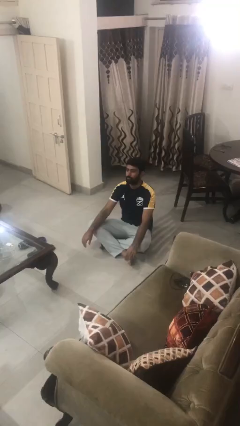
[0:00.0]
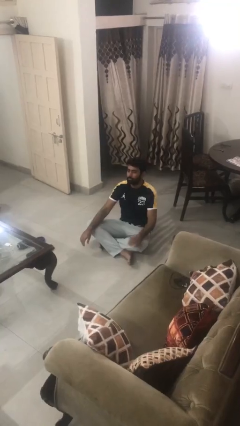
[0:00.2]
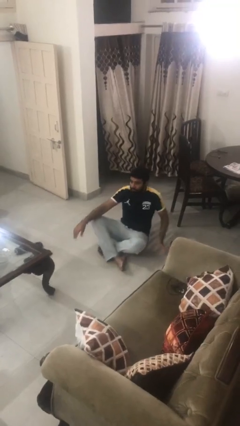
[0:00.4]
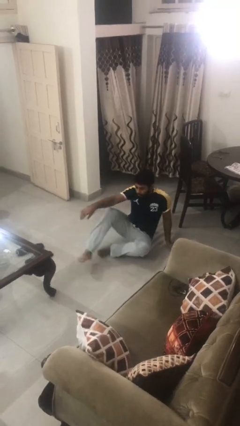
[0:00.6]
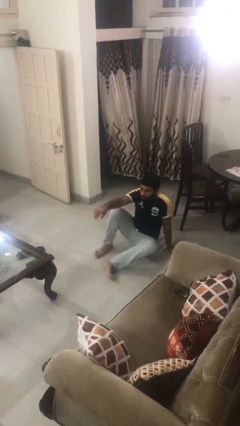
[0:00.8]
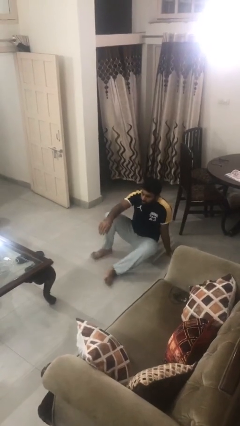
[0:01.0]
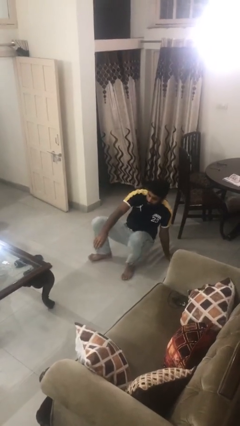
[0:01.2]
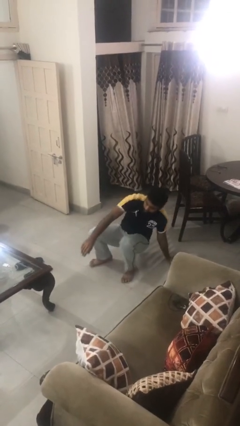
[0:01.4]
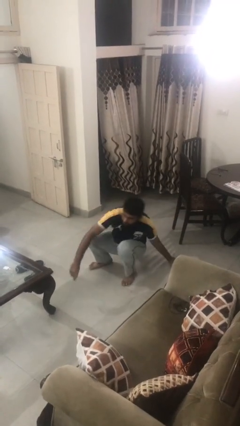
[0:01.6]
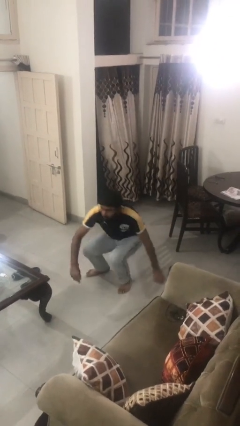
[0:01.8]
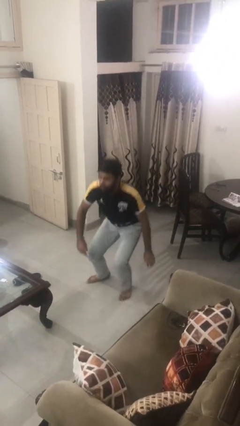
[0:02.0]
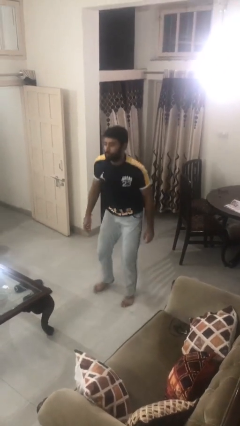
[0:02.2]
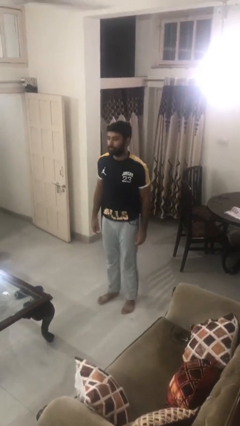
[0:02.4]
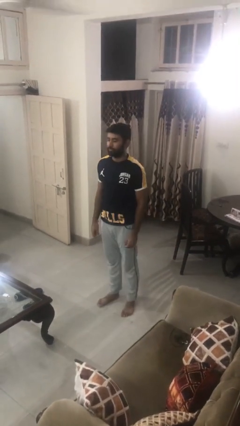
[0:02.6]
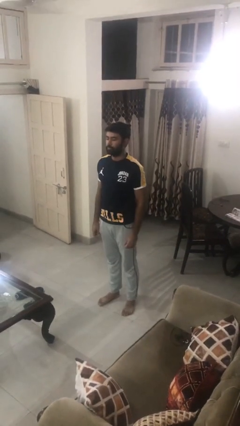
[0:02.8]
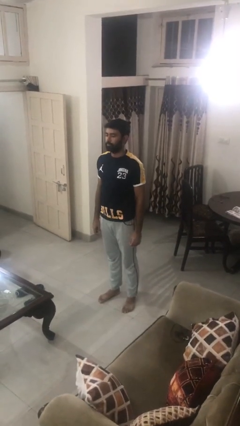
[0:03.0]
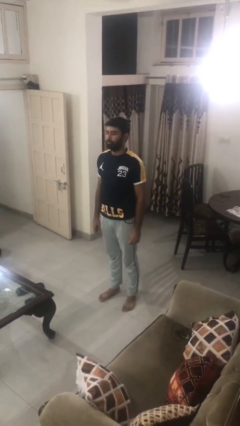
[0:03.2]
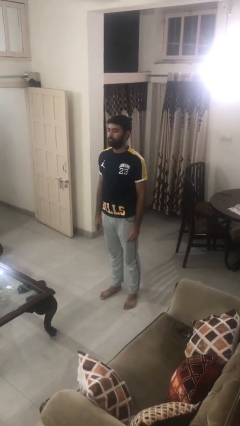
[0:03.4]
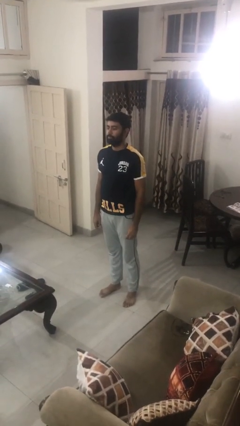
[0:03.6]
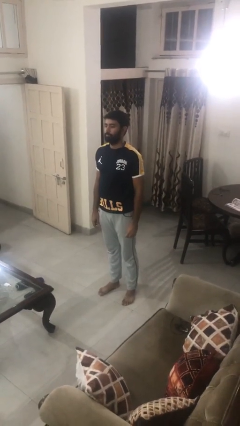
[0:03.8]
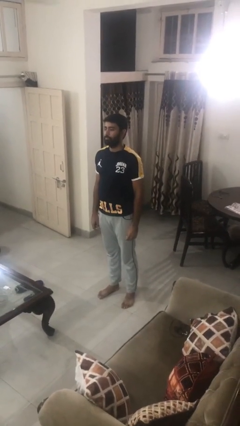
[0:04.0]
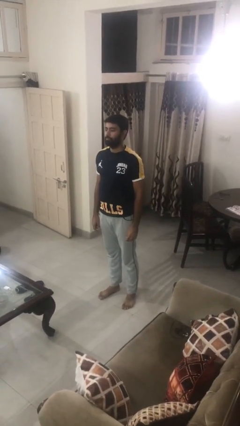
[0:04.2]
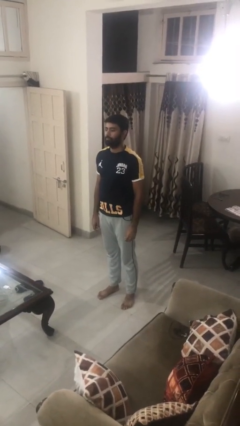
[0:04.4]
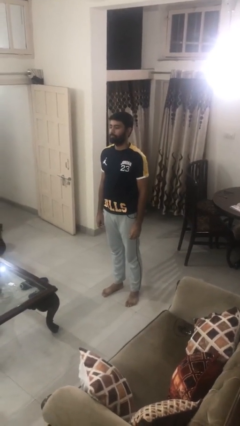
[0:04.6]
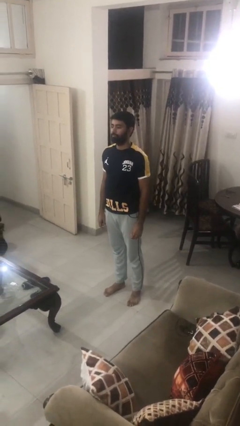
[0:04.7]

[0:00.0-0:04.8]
person stands up from floor

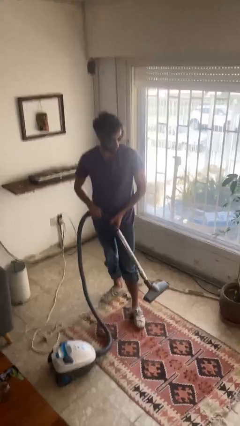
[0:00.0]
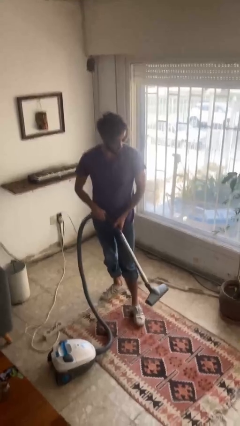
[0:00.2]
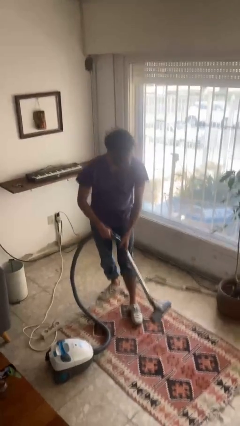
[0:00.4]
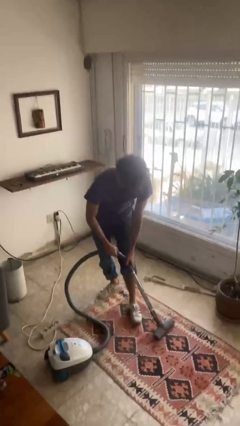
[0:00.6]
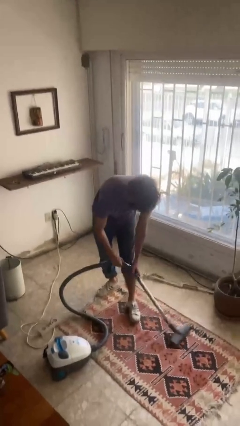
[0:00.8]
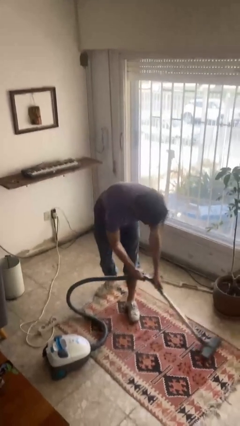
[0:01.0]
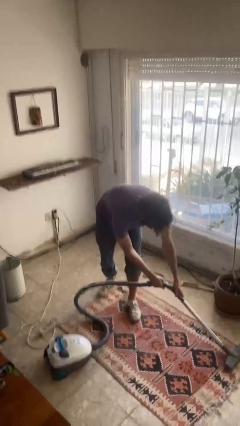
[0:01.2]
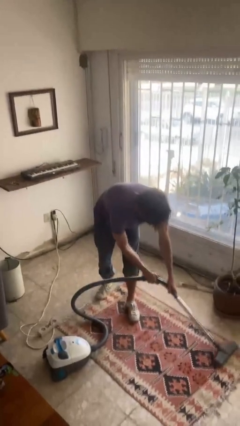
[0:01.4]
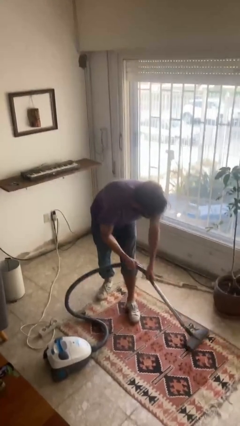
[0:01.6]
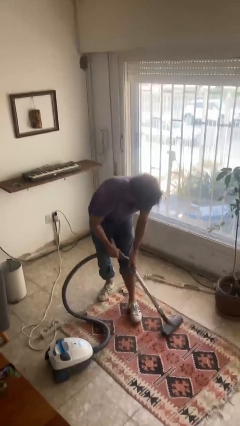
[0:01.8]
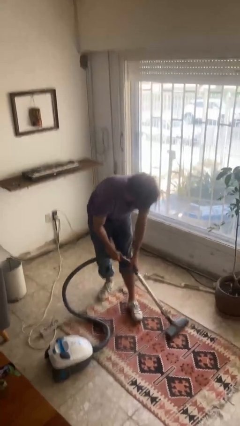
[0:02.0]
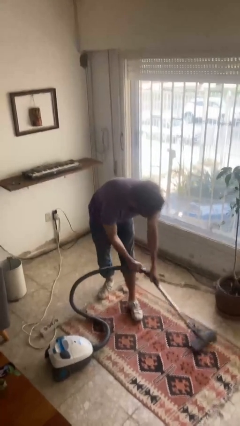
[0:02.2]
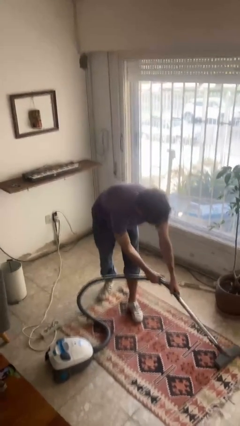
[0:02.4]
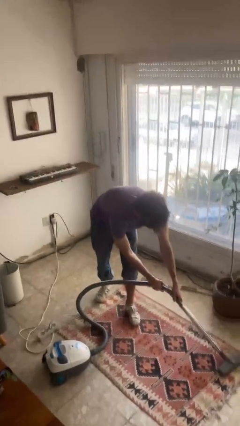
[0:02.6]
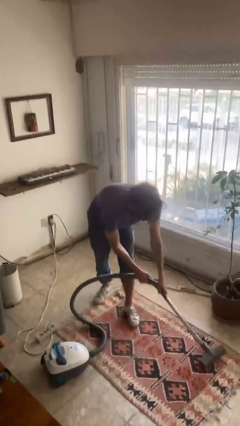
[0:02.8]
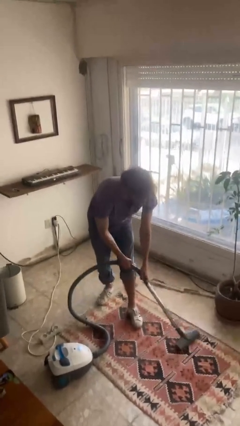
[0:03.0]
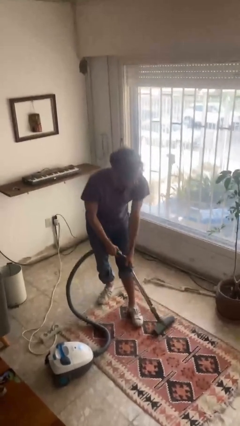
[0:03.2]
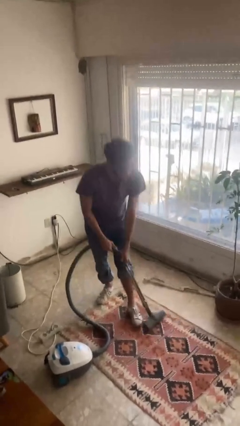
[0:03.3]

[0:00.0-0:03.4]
person vacuums carpet

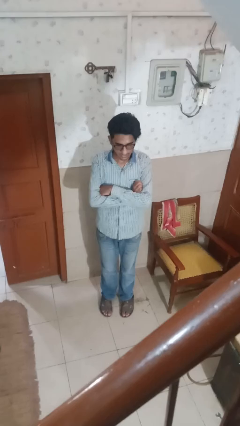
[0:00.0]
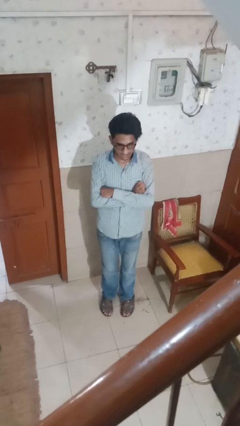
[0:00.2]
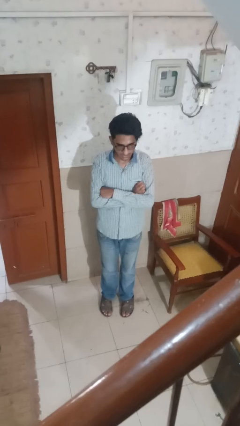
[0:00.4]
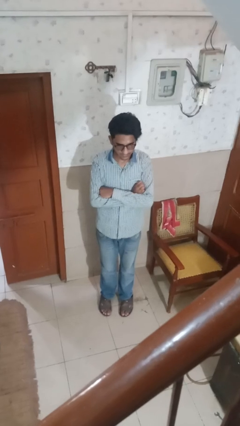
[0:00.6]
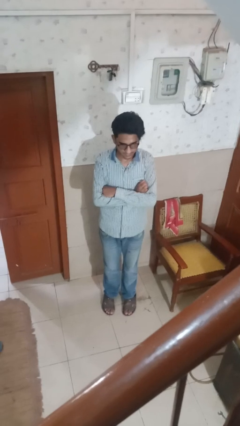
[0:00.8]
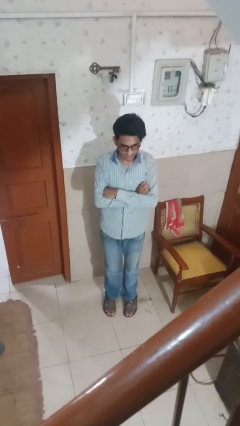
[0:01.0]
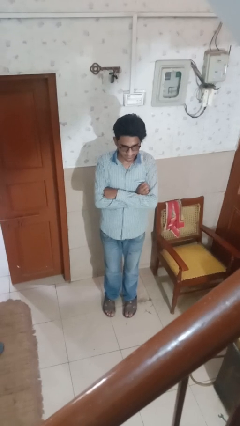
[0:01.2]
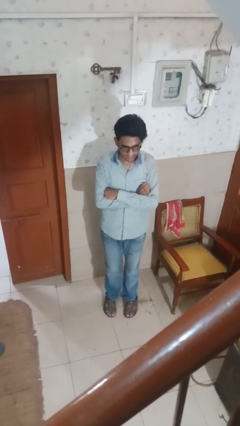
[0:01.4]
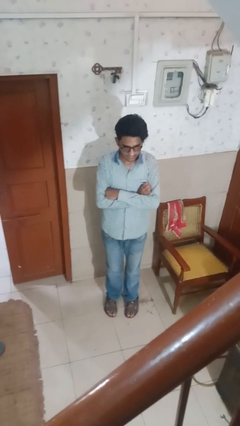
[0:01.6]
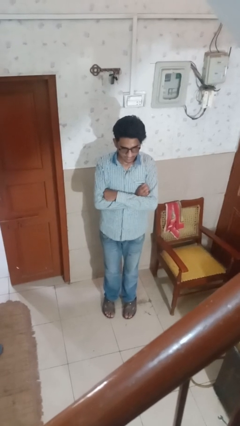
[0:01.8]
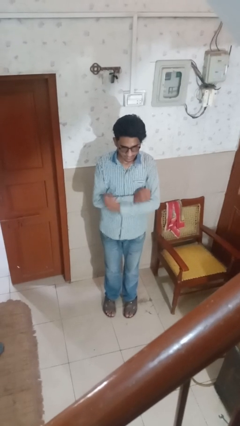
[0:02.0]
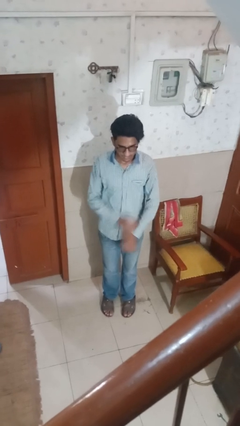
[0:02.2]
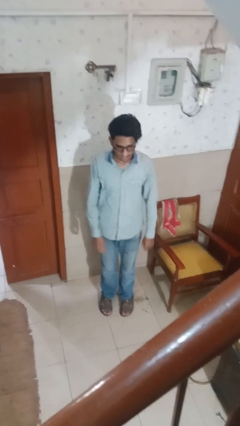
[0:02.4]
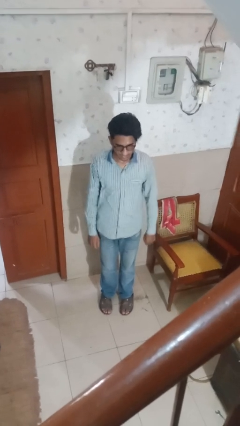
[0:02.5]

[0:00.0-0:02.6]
person crosses arms

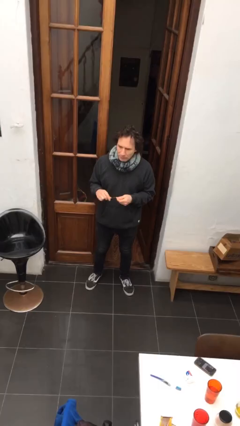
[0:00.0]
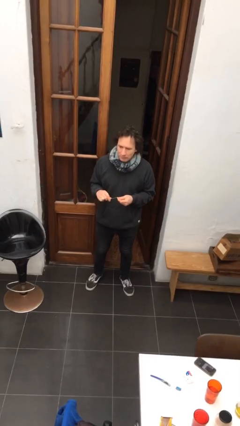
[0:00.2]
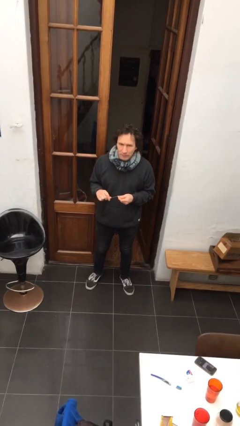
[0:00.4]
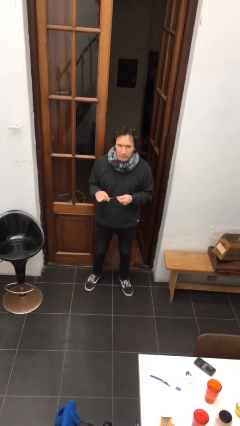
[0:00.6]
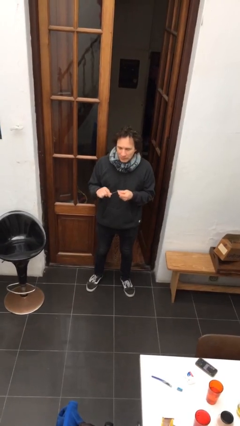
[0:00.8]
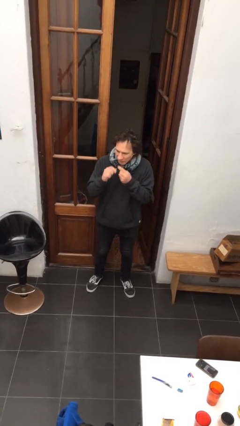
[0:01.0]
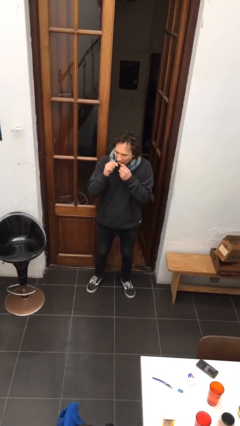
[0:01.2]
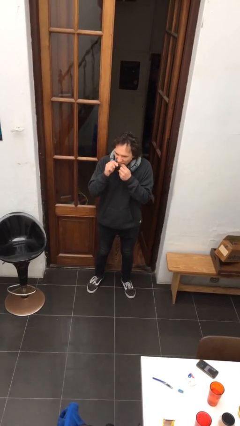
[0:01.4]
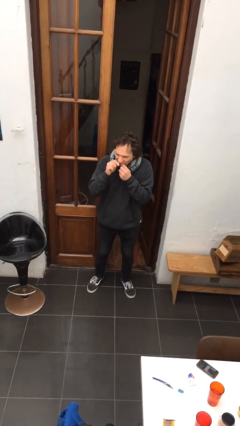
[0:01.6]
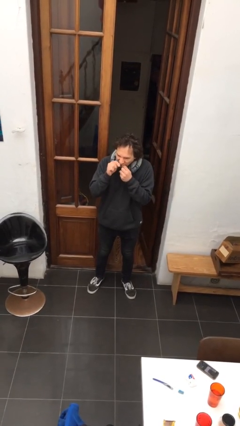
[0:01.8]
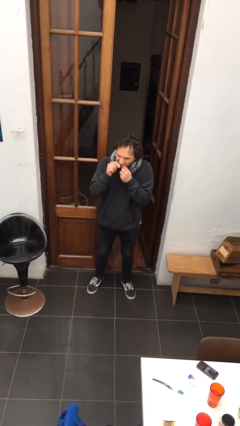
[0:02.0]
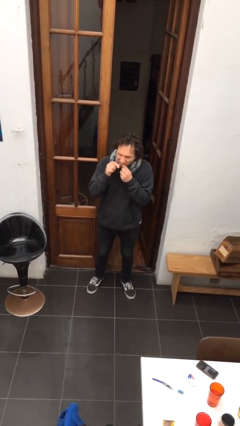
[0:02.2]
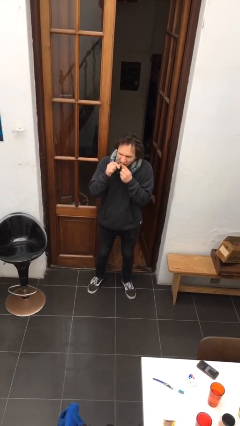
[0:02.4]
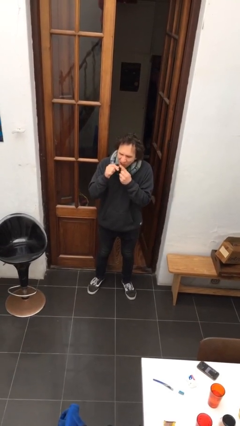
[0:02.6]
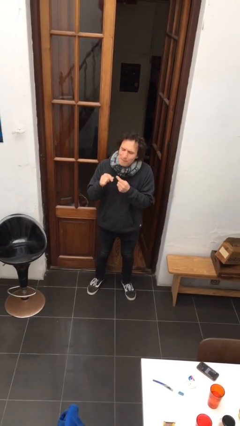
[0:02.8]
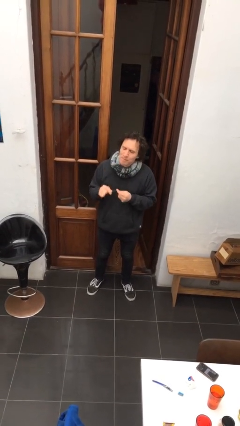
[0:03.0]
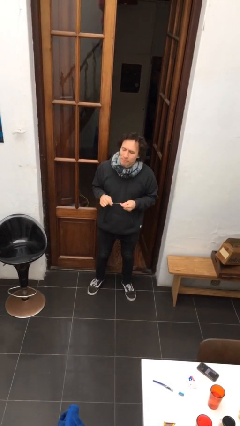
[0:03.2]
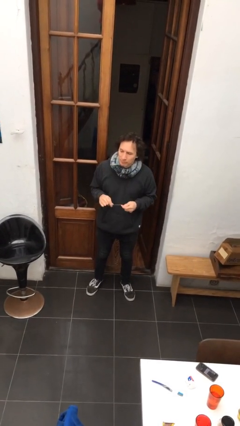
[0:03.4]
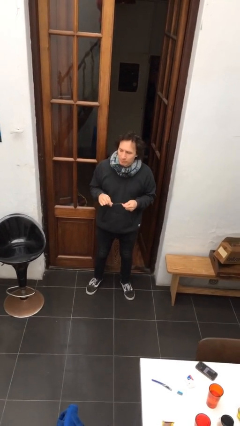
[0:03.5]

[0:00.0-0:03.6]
person flosses

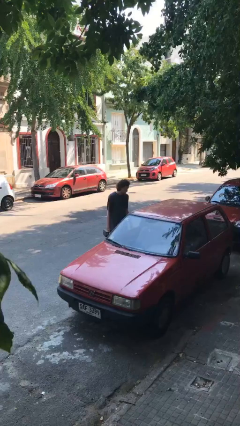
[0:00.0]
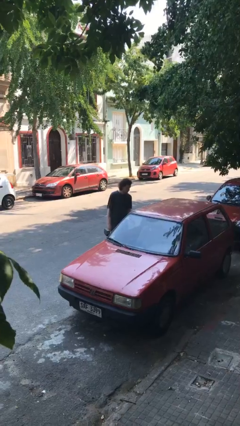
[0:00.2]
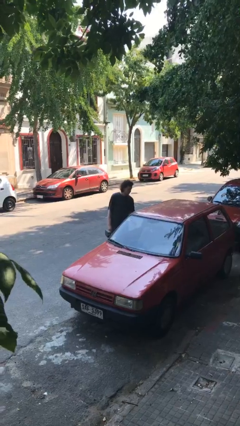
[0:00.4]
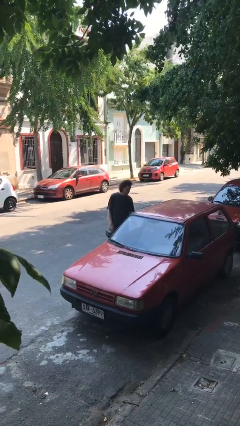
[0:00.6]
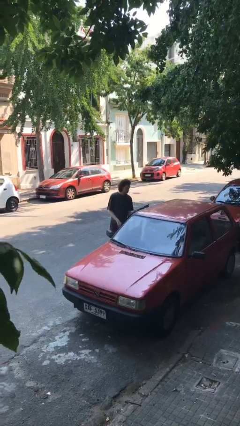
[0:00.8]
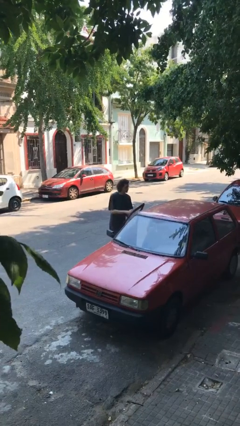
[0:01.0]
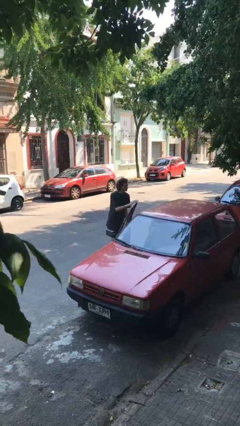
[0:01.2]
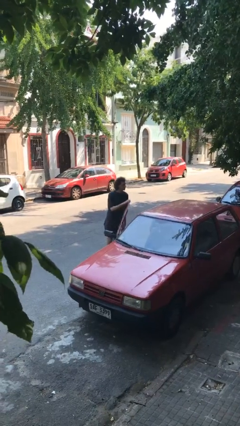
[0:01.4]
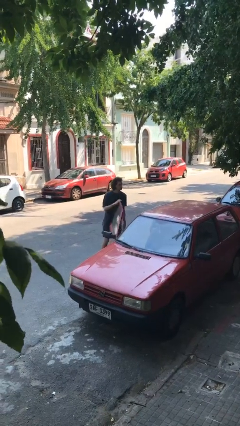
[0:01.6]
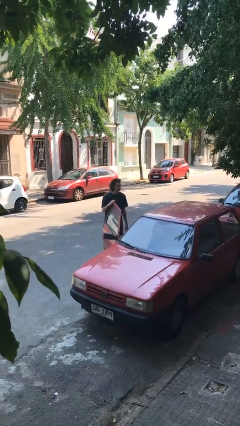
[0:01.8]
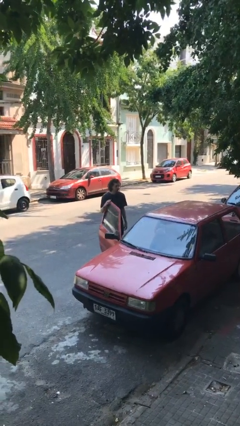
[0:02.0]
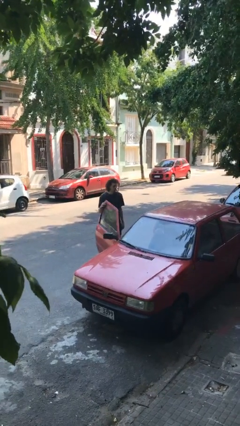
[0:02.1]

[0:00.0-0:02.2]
person opens car door

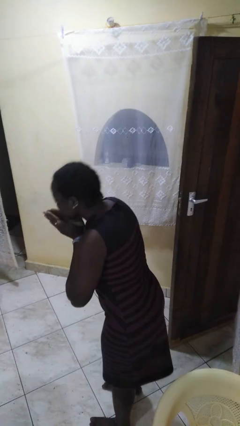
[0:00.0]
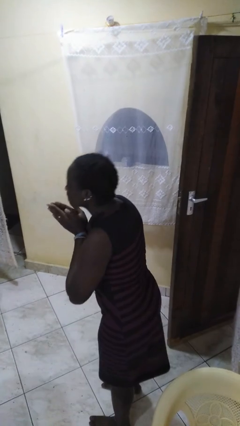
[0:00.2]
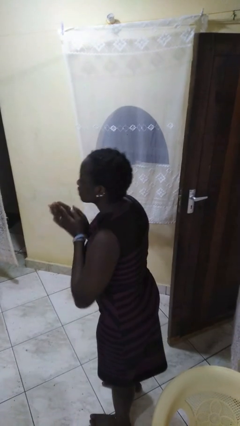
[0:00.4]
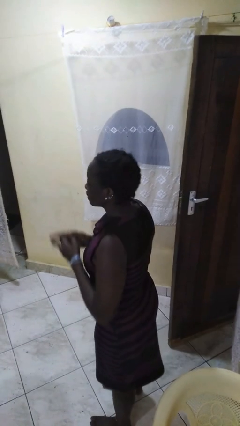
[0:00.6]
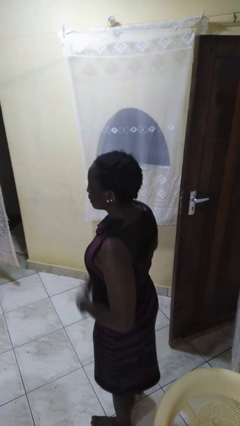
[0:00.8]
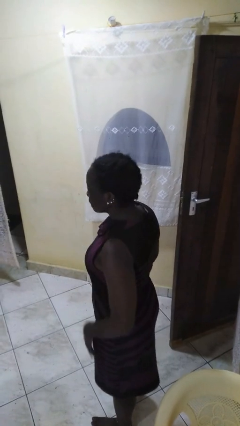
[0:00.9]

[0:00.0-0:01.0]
person sneezes into hand
